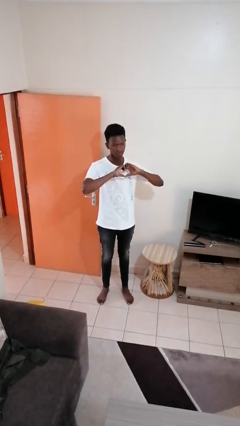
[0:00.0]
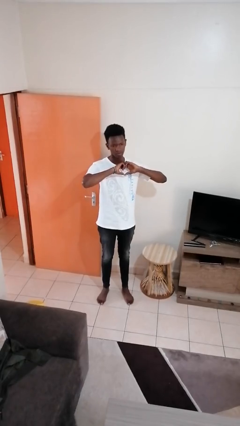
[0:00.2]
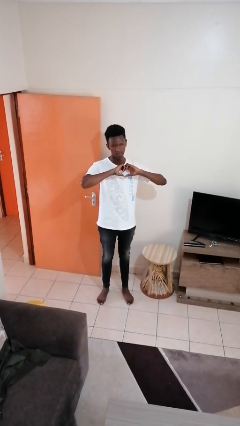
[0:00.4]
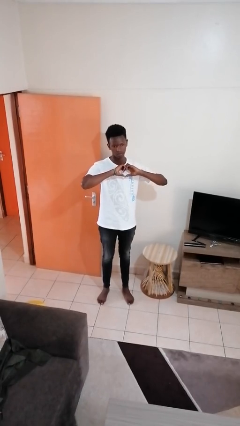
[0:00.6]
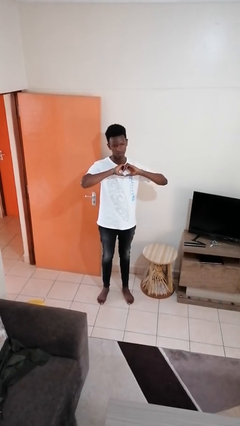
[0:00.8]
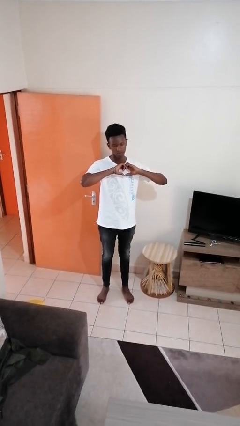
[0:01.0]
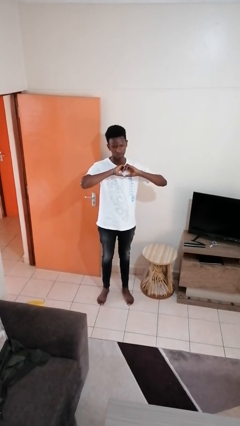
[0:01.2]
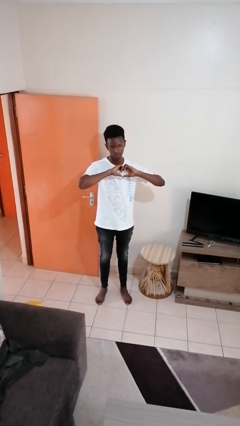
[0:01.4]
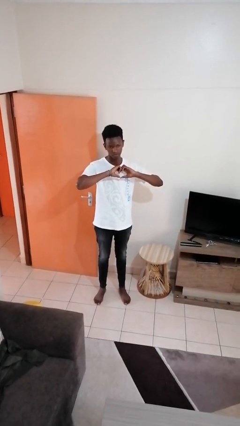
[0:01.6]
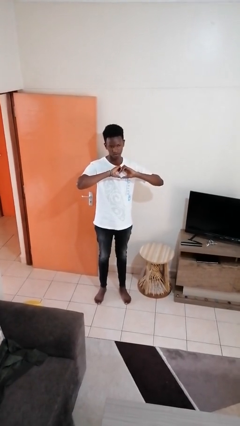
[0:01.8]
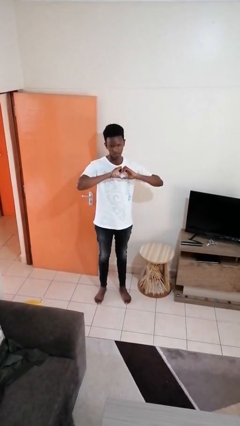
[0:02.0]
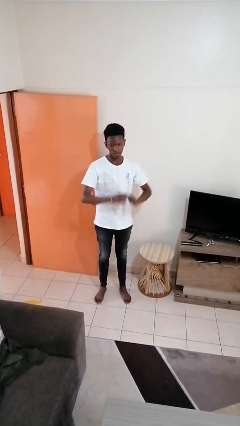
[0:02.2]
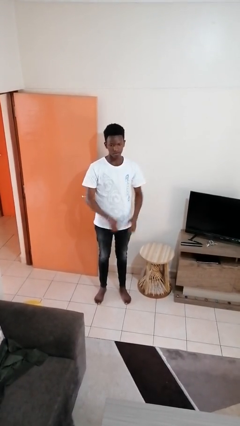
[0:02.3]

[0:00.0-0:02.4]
person gestures heart

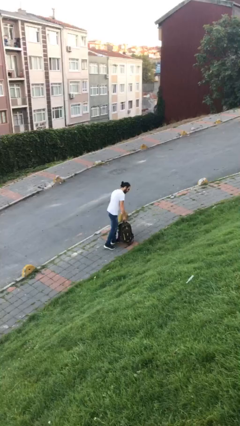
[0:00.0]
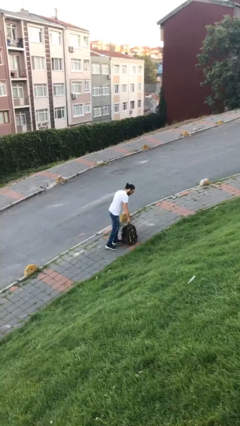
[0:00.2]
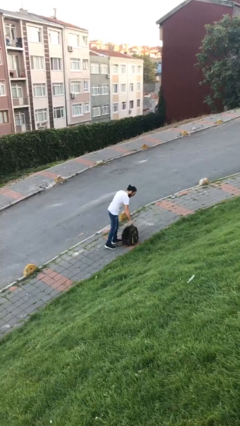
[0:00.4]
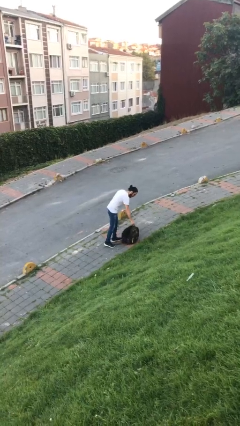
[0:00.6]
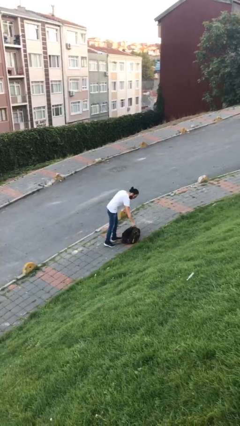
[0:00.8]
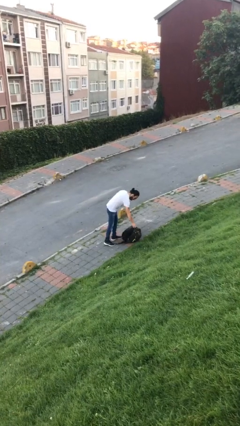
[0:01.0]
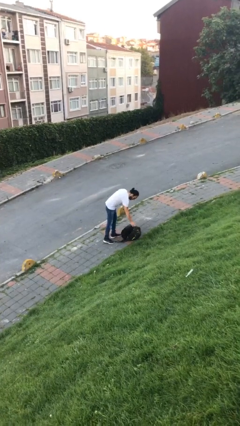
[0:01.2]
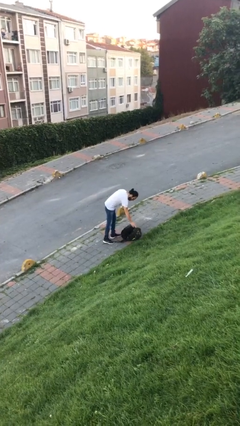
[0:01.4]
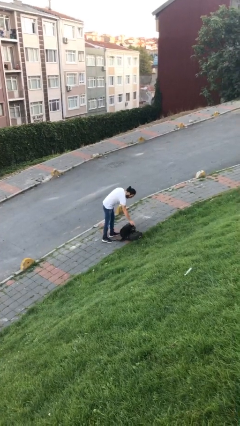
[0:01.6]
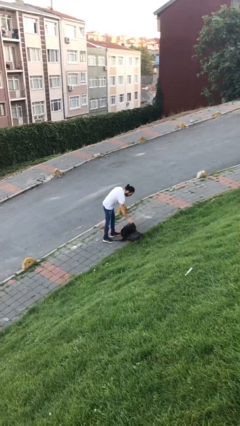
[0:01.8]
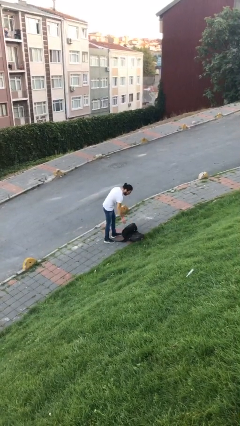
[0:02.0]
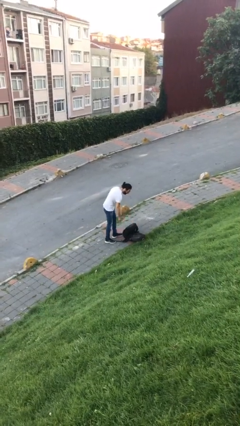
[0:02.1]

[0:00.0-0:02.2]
person puts down object on floor

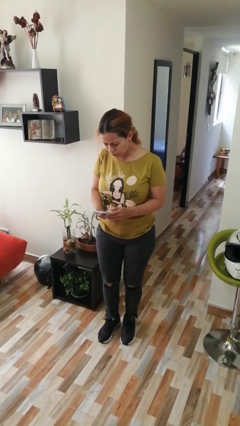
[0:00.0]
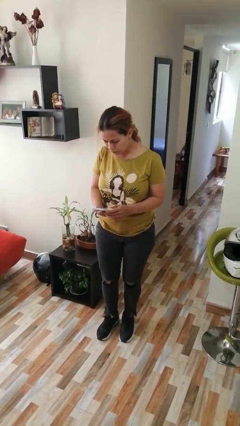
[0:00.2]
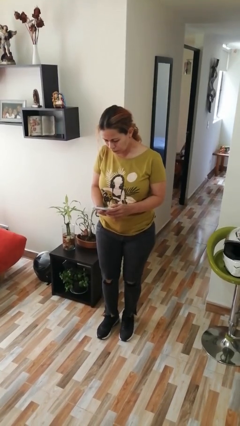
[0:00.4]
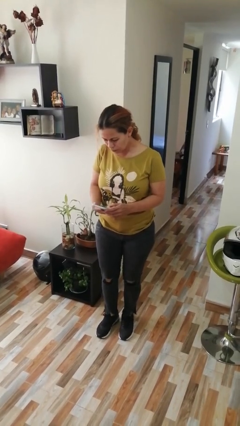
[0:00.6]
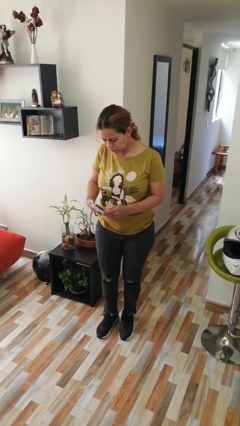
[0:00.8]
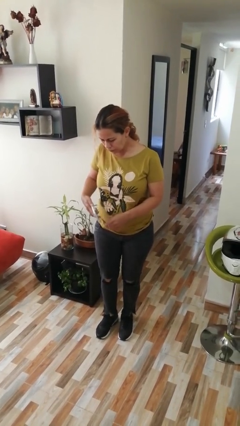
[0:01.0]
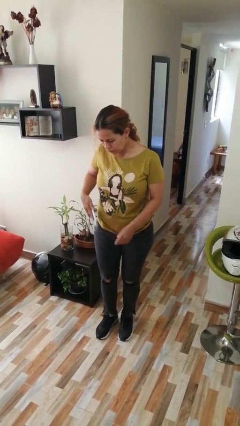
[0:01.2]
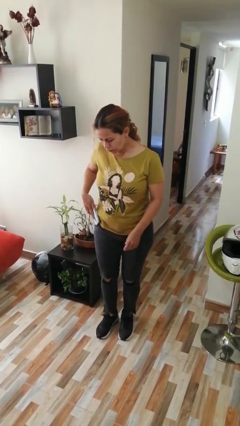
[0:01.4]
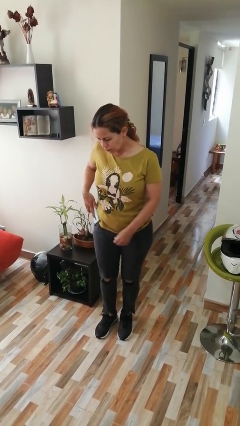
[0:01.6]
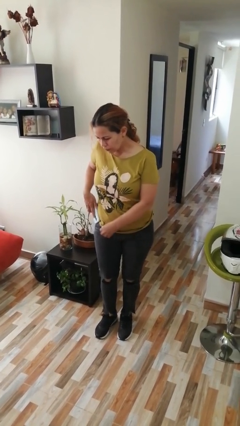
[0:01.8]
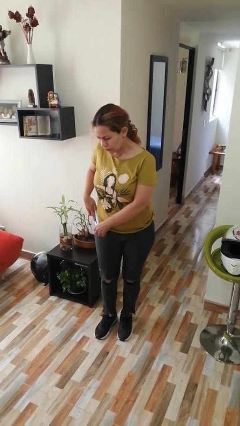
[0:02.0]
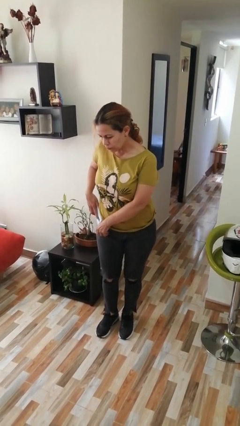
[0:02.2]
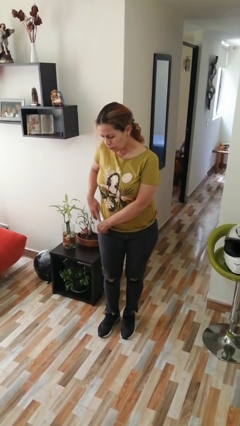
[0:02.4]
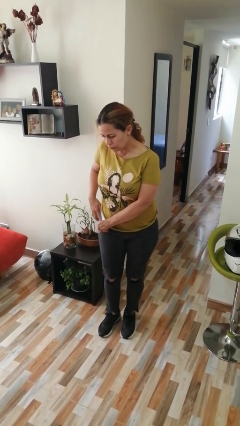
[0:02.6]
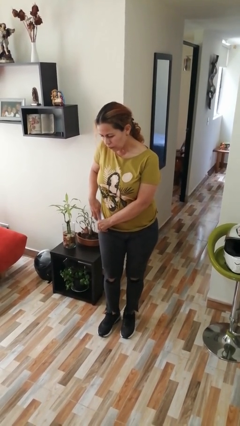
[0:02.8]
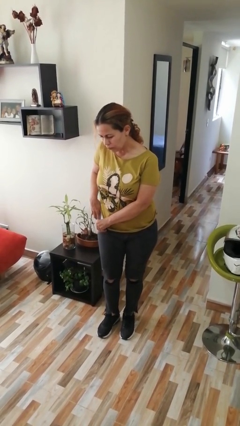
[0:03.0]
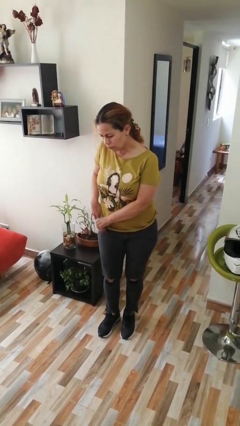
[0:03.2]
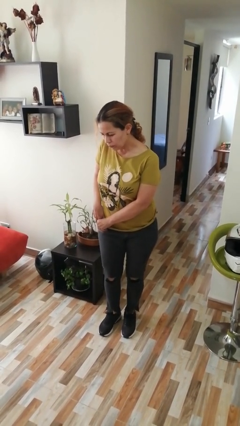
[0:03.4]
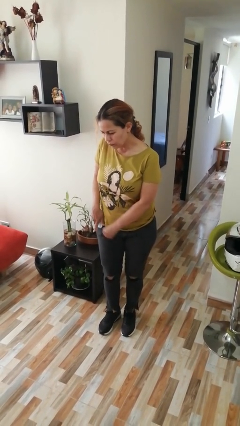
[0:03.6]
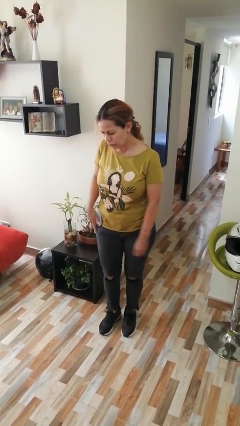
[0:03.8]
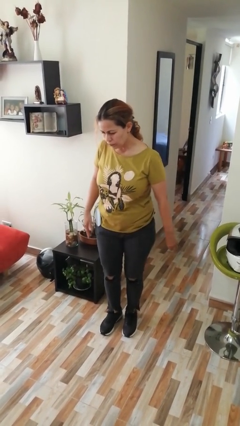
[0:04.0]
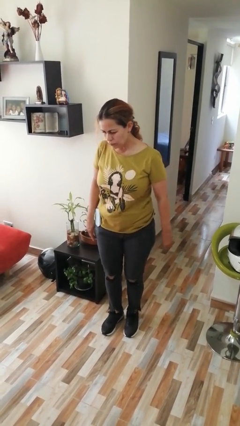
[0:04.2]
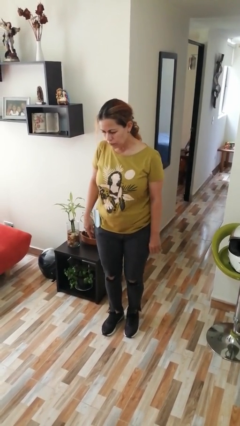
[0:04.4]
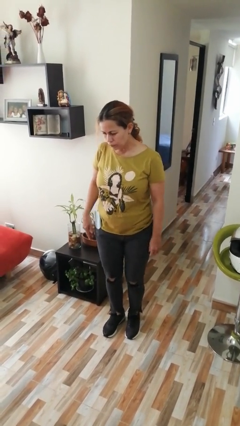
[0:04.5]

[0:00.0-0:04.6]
person takes phone from pocket

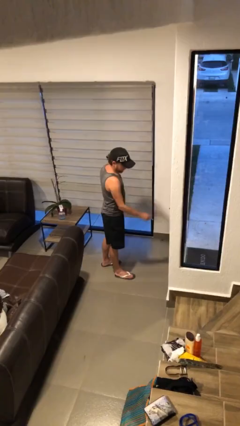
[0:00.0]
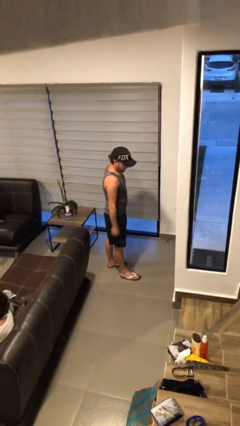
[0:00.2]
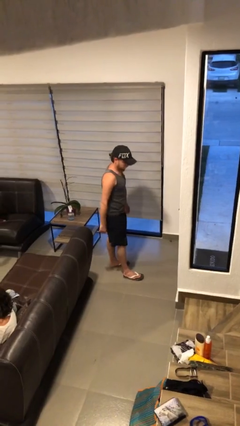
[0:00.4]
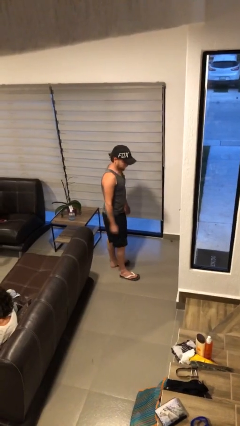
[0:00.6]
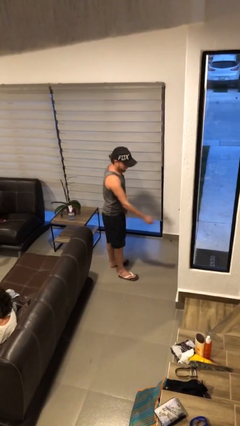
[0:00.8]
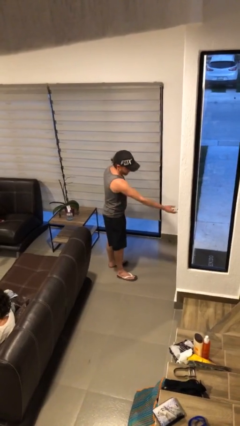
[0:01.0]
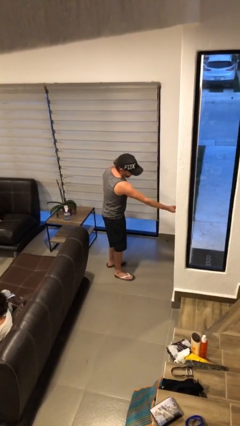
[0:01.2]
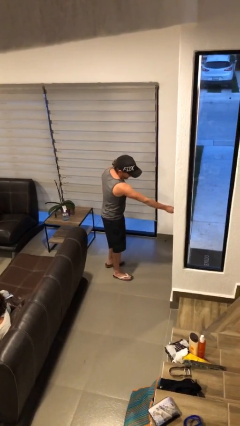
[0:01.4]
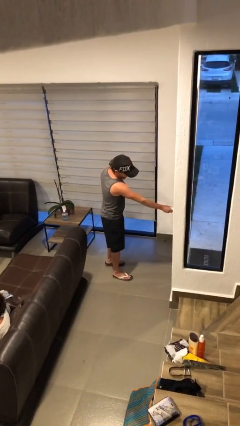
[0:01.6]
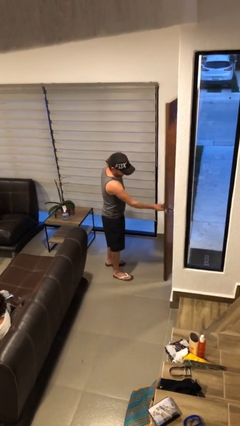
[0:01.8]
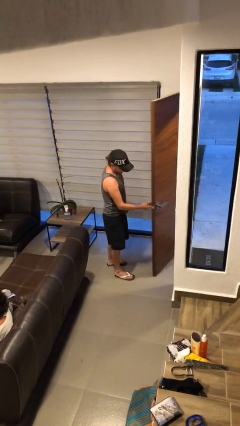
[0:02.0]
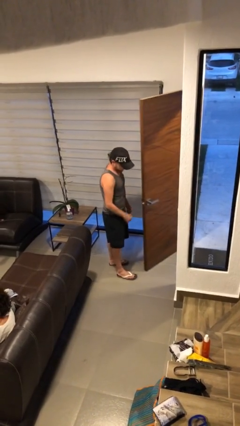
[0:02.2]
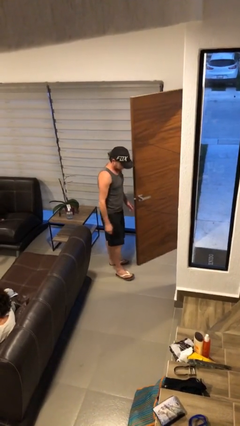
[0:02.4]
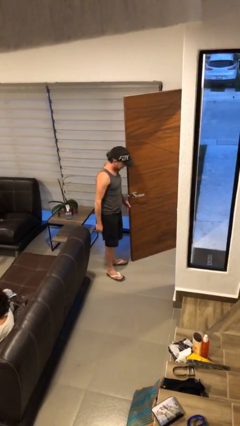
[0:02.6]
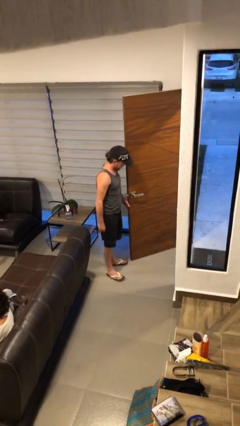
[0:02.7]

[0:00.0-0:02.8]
person opens facility door

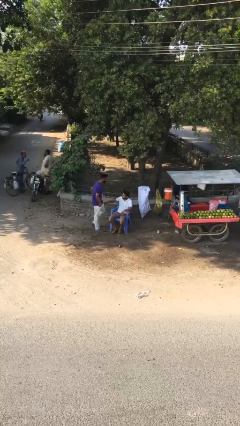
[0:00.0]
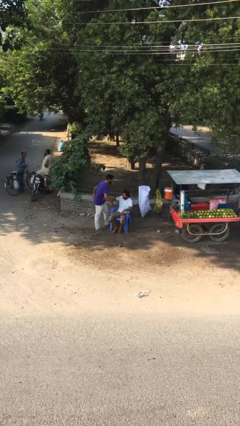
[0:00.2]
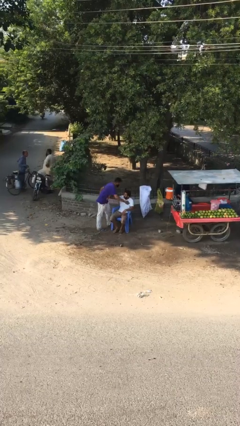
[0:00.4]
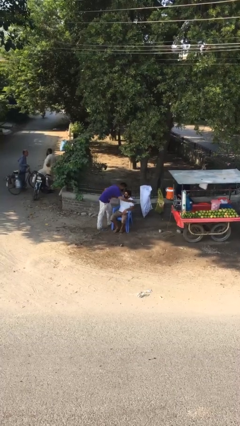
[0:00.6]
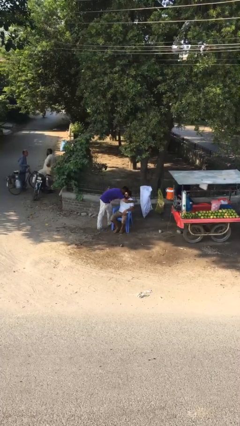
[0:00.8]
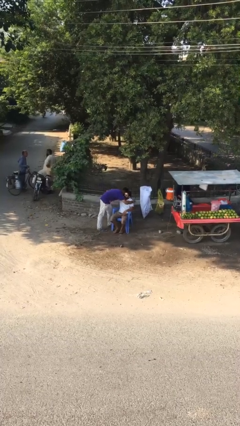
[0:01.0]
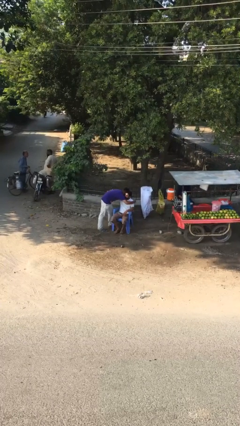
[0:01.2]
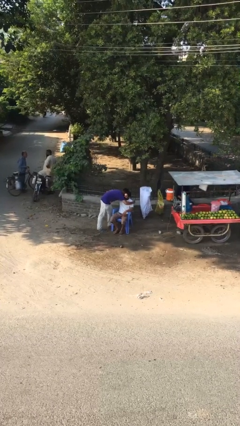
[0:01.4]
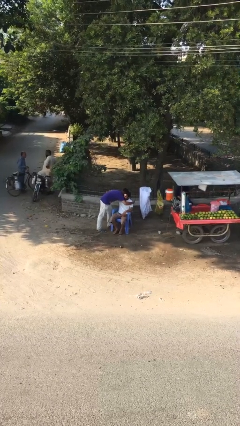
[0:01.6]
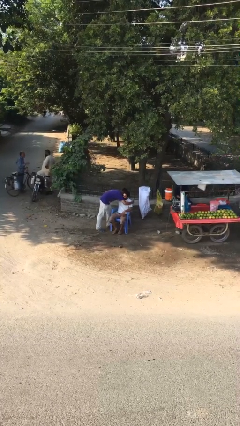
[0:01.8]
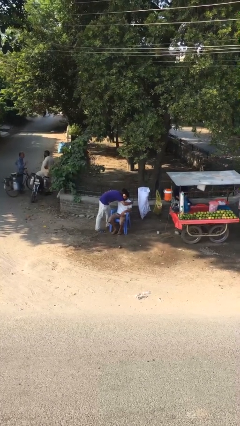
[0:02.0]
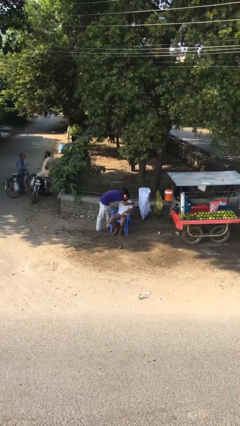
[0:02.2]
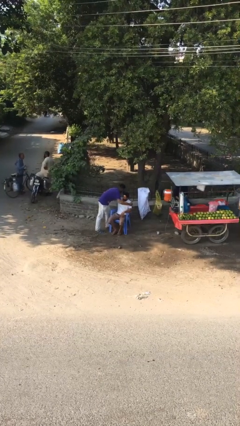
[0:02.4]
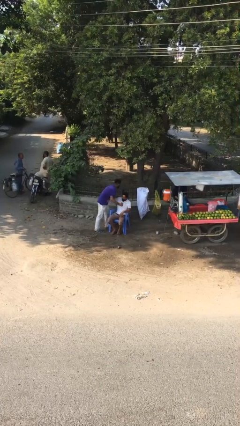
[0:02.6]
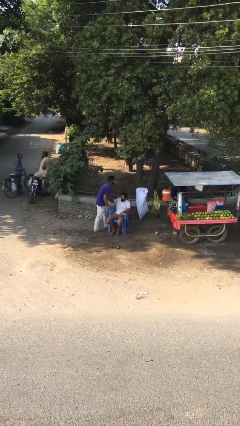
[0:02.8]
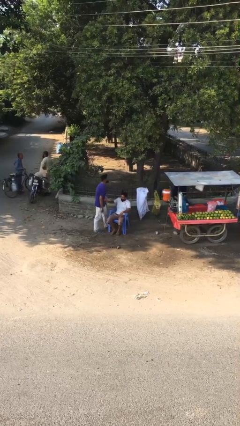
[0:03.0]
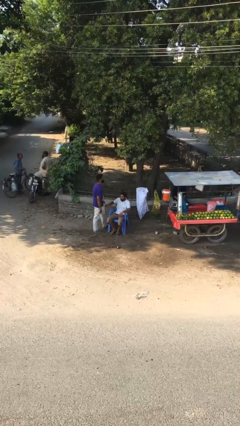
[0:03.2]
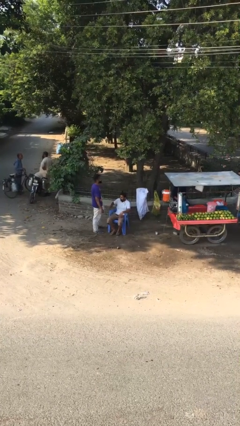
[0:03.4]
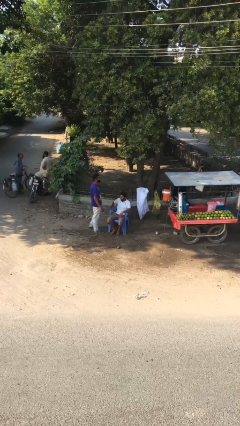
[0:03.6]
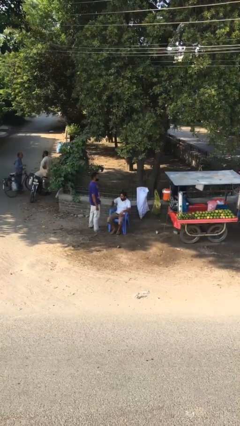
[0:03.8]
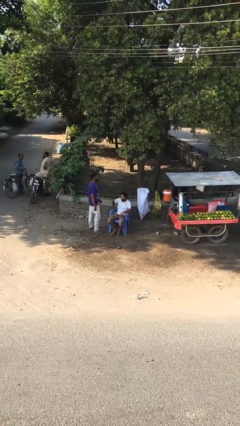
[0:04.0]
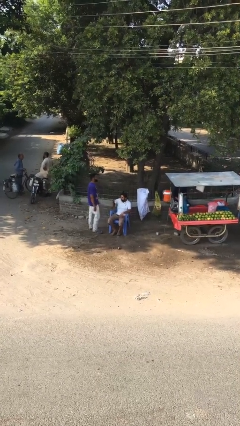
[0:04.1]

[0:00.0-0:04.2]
person embraces person

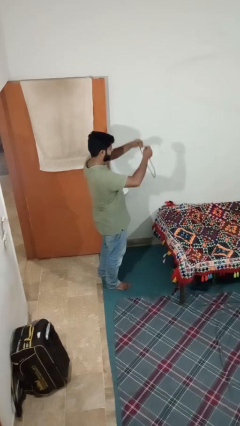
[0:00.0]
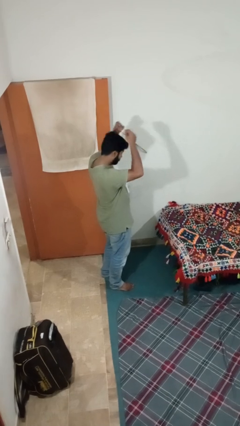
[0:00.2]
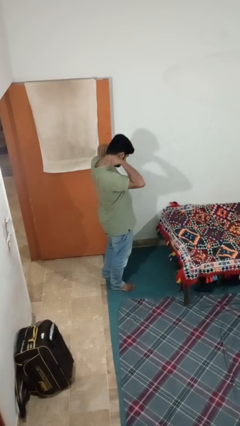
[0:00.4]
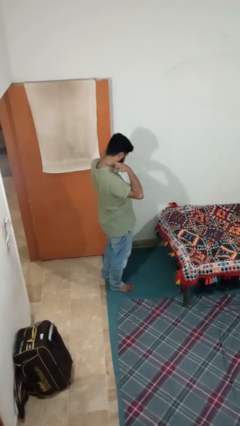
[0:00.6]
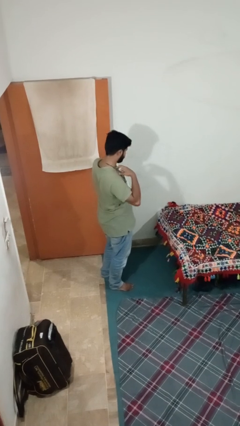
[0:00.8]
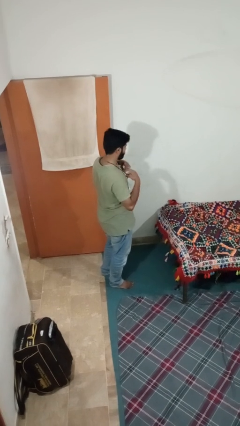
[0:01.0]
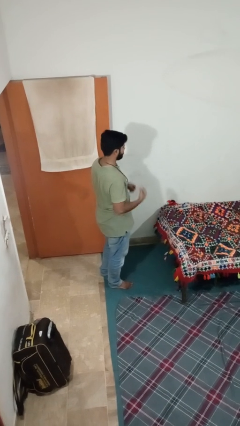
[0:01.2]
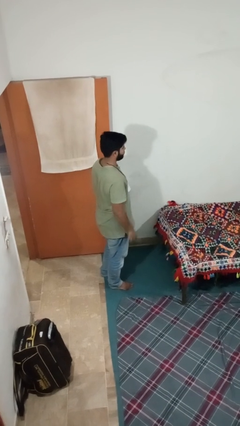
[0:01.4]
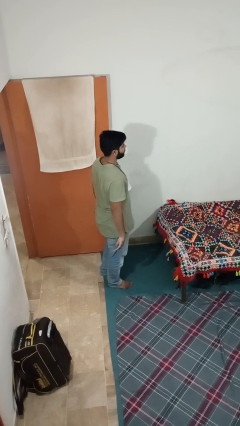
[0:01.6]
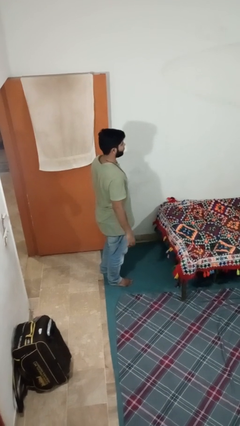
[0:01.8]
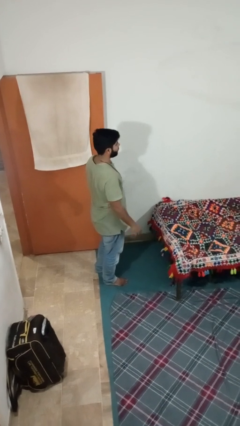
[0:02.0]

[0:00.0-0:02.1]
person puts on necklace
